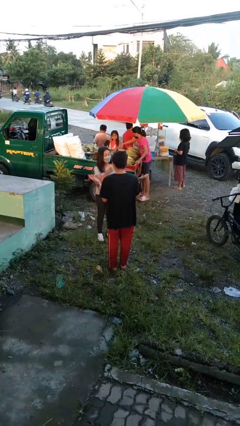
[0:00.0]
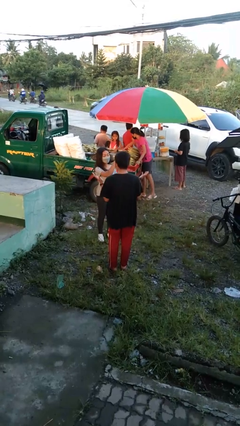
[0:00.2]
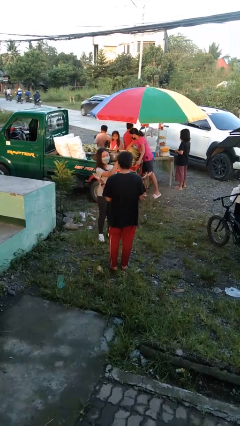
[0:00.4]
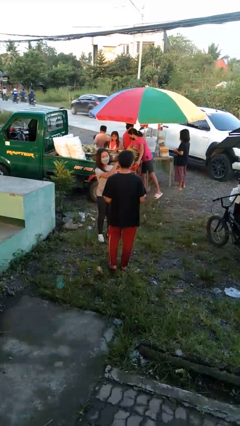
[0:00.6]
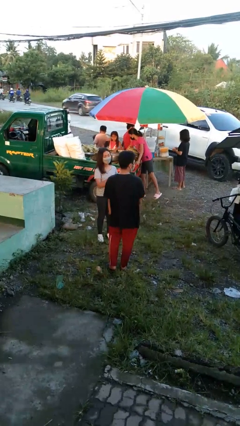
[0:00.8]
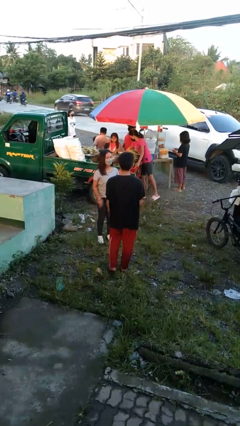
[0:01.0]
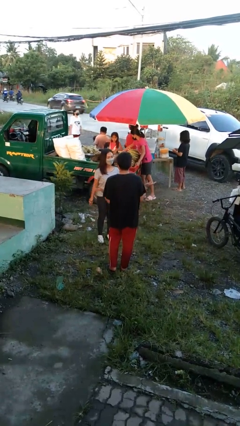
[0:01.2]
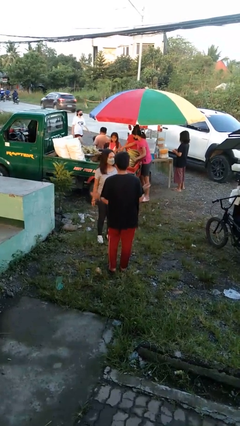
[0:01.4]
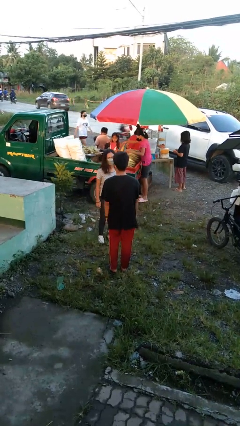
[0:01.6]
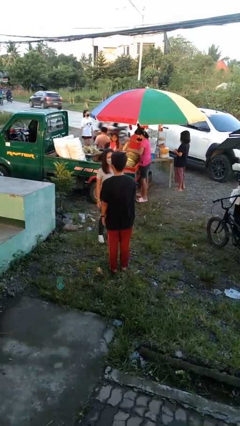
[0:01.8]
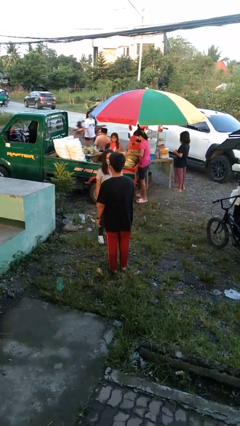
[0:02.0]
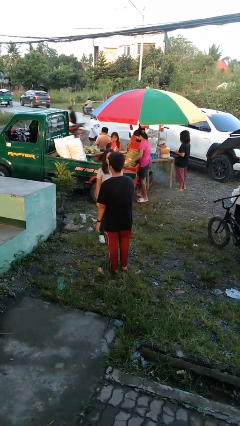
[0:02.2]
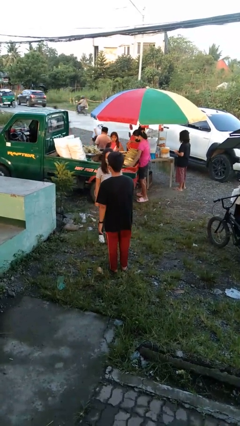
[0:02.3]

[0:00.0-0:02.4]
person talks to person

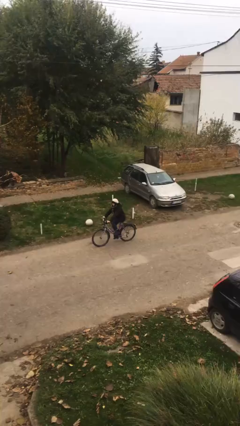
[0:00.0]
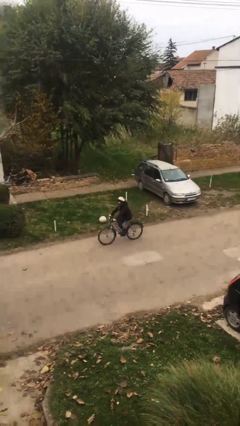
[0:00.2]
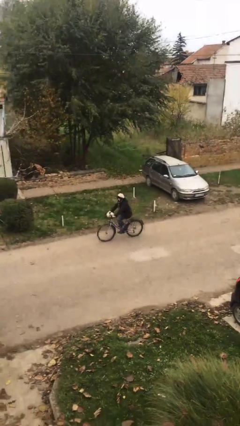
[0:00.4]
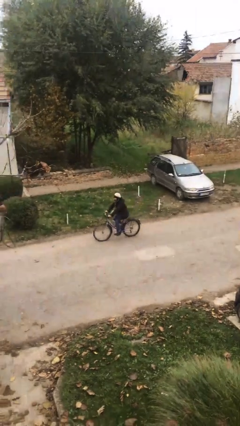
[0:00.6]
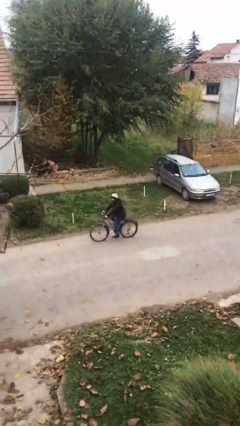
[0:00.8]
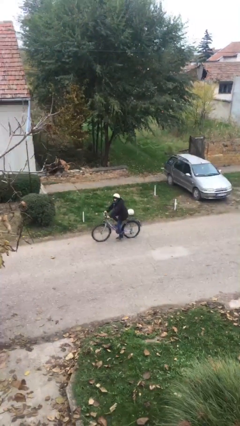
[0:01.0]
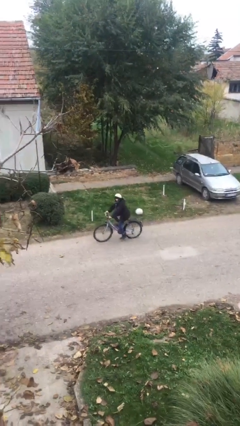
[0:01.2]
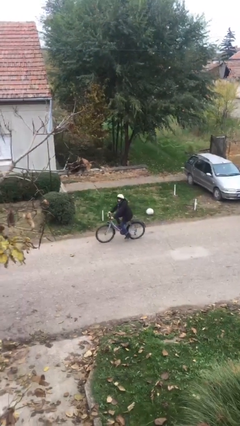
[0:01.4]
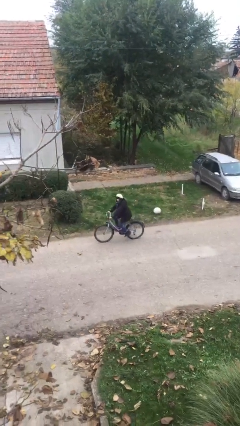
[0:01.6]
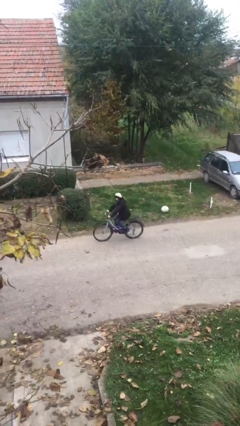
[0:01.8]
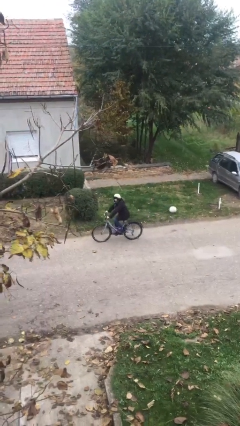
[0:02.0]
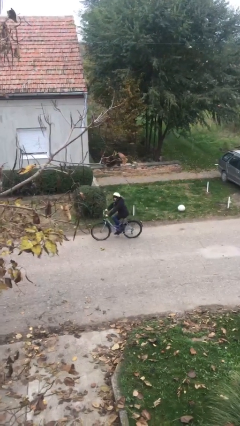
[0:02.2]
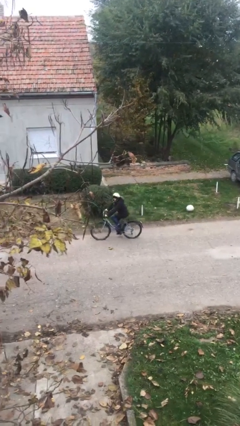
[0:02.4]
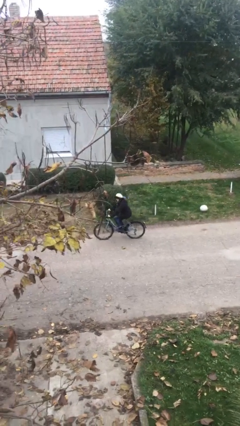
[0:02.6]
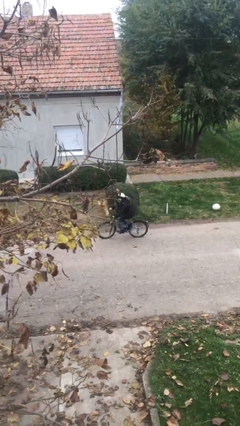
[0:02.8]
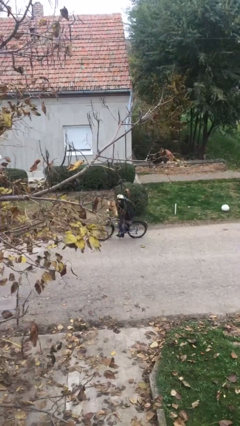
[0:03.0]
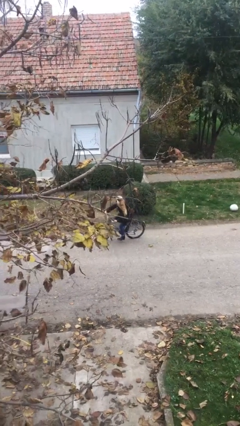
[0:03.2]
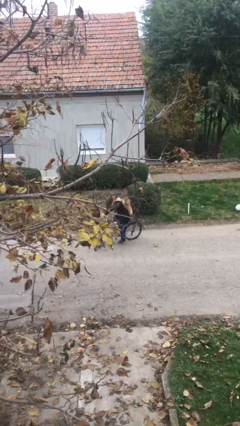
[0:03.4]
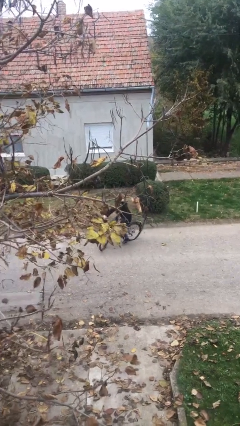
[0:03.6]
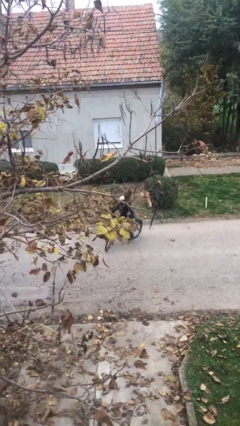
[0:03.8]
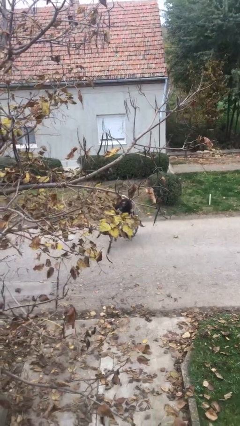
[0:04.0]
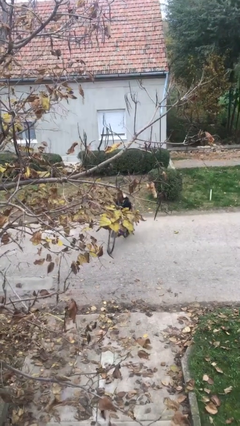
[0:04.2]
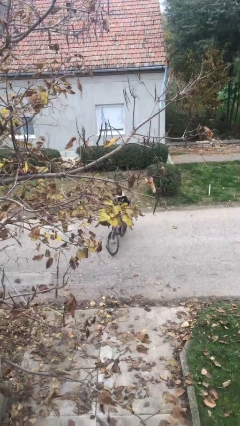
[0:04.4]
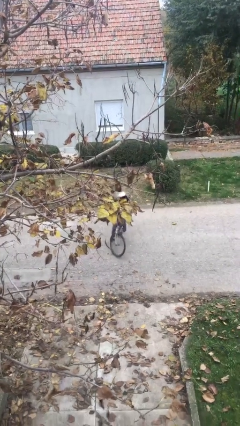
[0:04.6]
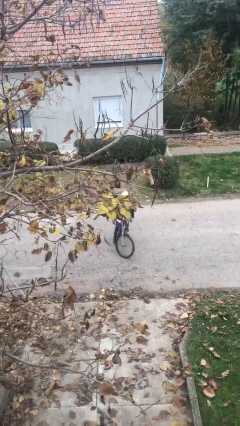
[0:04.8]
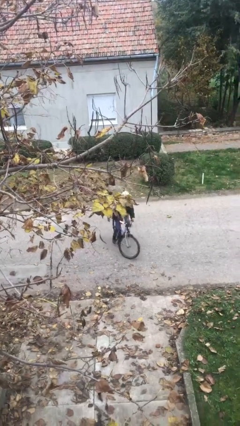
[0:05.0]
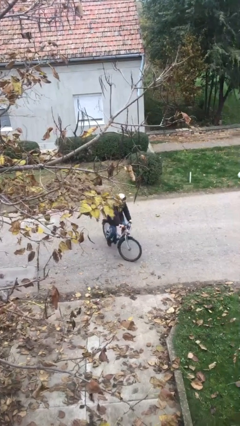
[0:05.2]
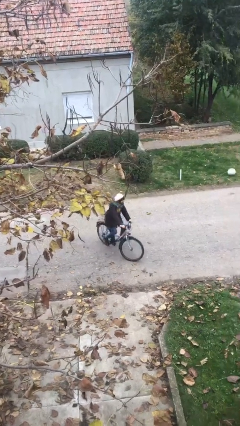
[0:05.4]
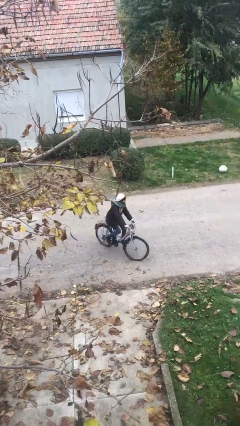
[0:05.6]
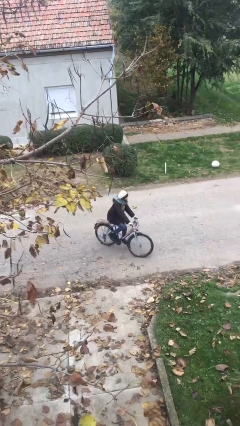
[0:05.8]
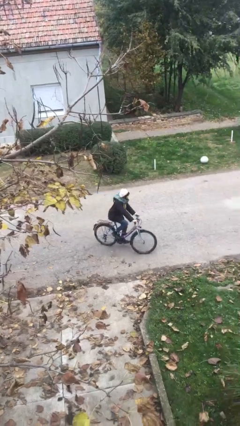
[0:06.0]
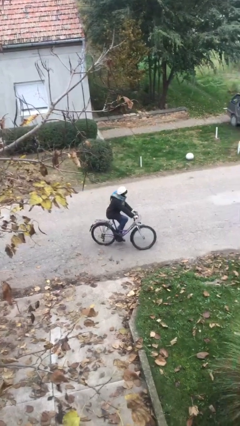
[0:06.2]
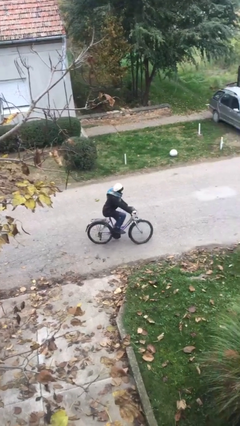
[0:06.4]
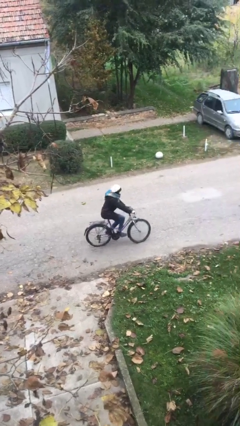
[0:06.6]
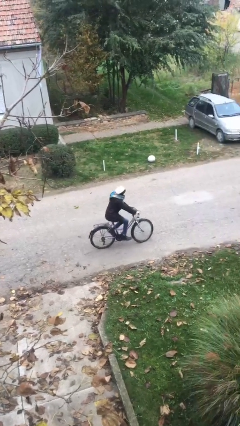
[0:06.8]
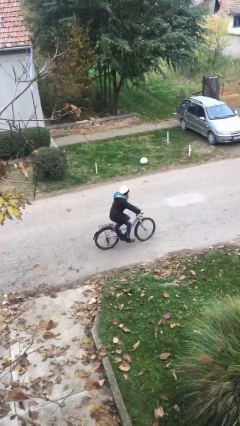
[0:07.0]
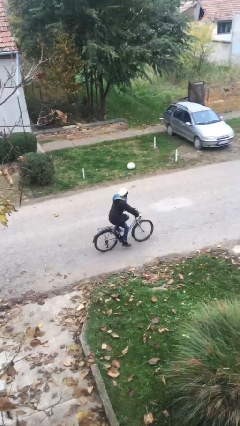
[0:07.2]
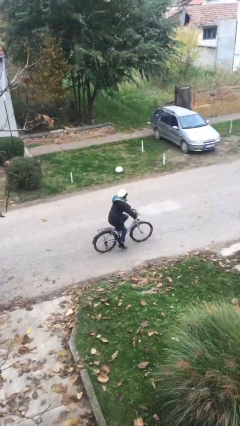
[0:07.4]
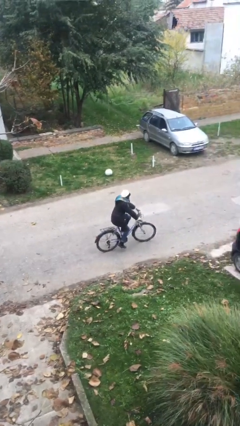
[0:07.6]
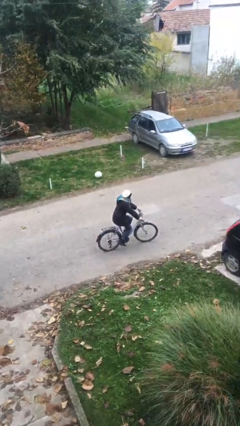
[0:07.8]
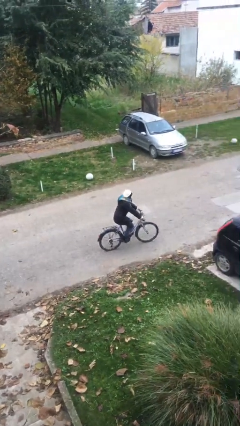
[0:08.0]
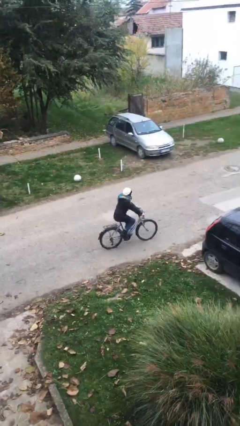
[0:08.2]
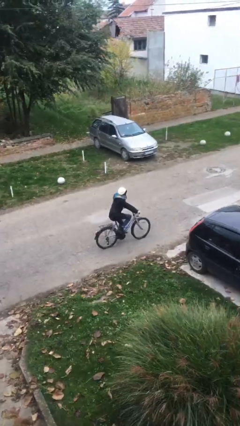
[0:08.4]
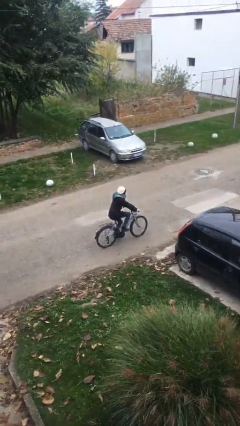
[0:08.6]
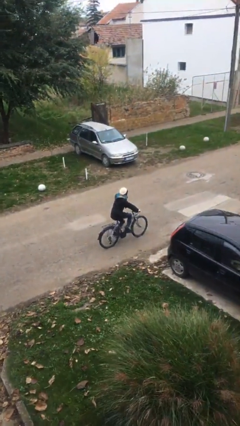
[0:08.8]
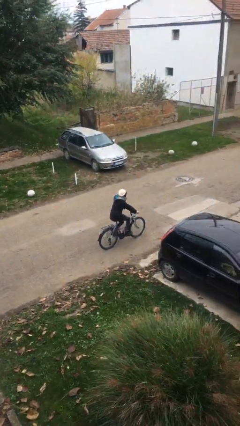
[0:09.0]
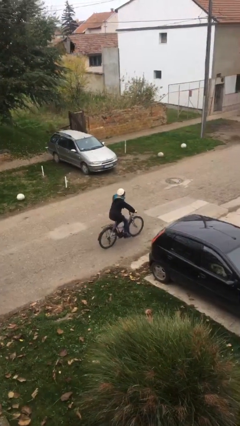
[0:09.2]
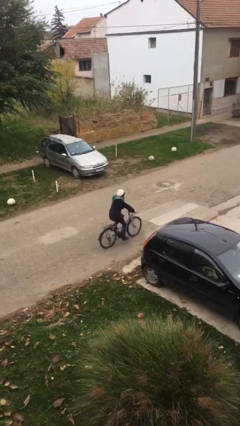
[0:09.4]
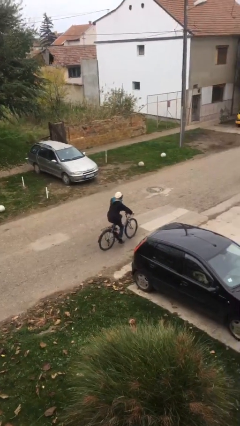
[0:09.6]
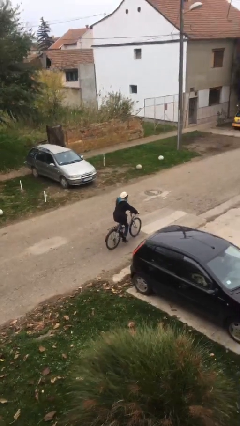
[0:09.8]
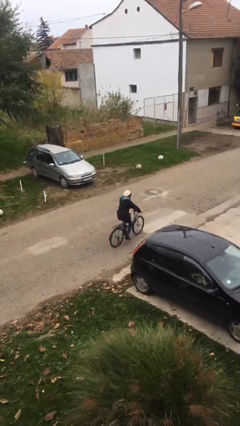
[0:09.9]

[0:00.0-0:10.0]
person rides bicycle

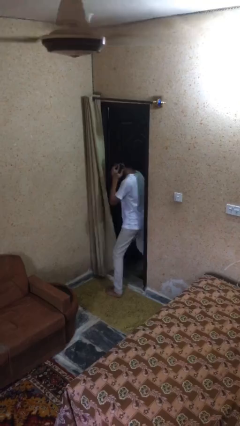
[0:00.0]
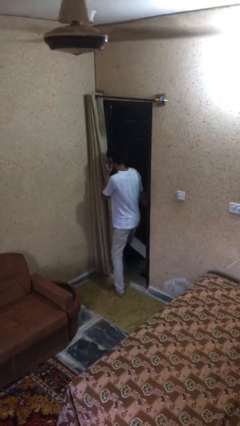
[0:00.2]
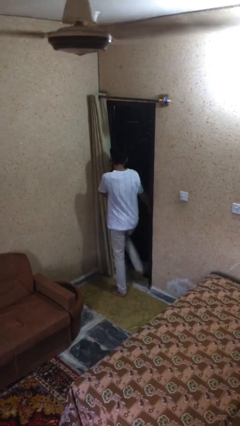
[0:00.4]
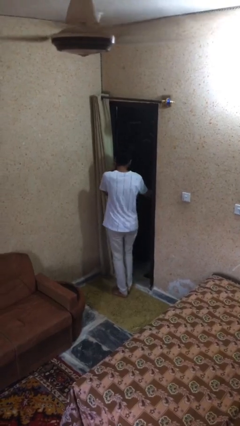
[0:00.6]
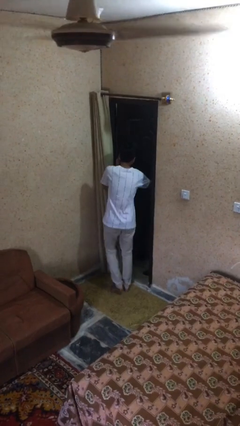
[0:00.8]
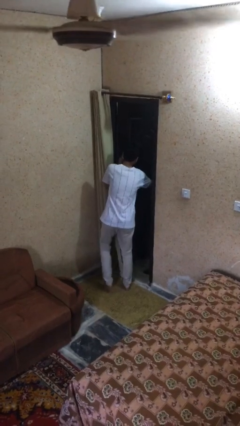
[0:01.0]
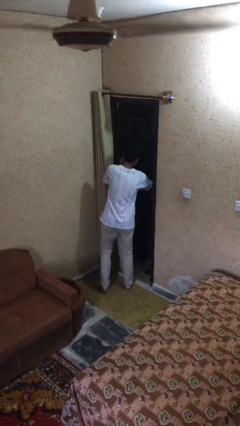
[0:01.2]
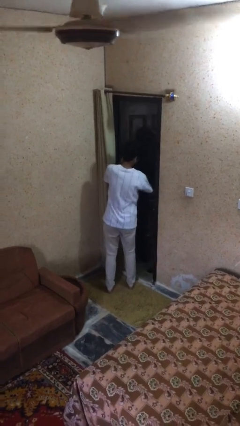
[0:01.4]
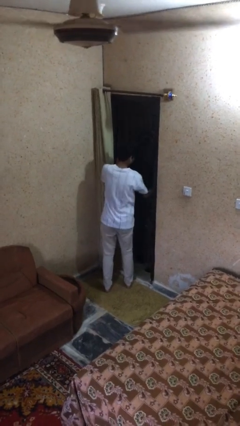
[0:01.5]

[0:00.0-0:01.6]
person enters scene through structure

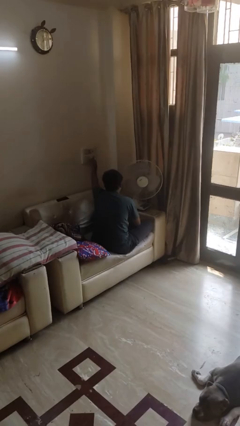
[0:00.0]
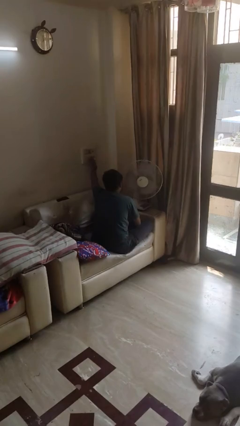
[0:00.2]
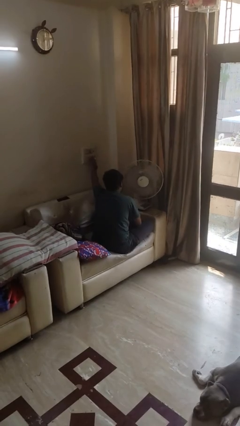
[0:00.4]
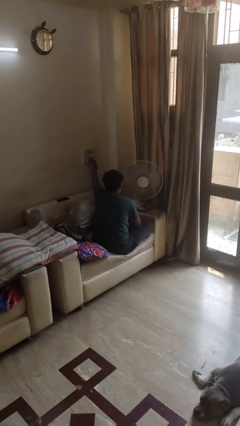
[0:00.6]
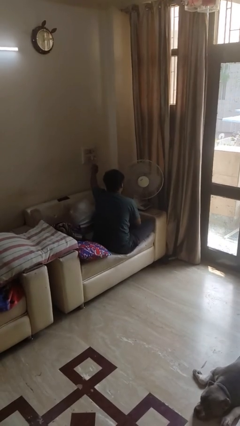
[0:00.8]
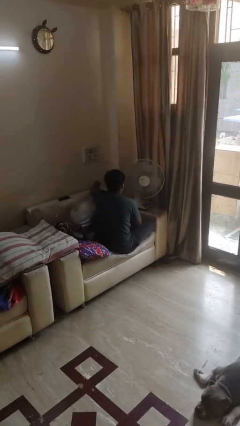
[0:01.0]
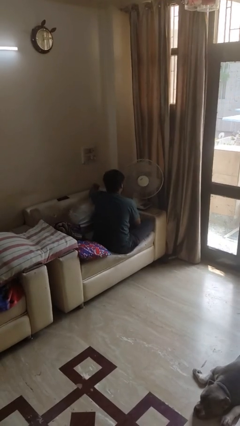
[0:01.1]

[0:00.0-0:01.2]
person turns off fan

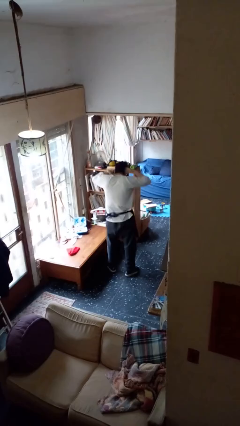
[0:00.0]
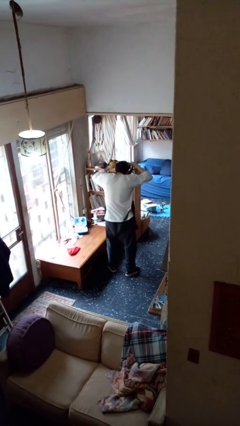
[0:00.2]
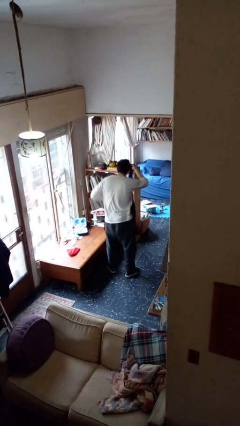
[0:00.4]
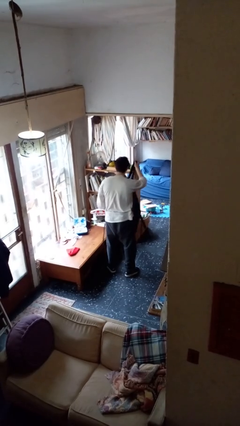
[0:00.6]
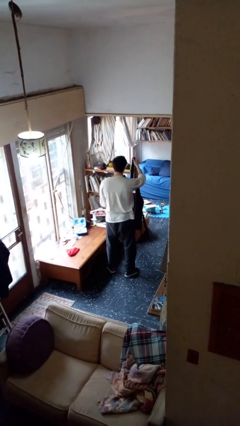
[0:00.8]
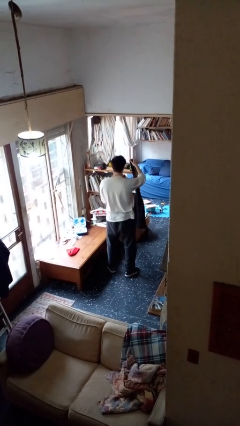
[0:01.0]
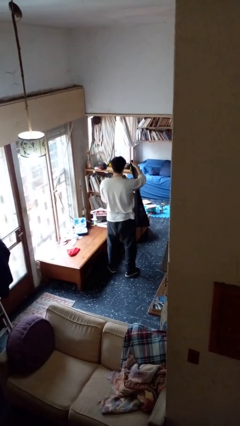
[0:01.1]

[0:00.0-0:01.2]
person takes off apron

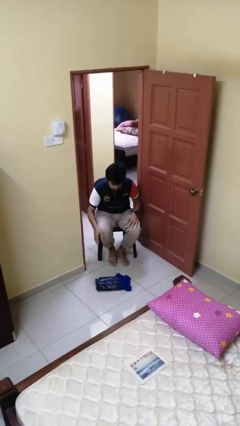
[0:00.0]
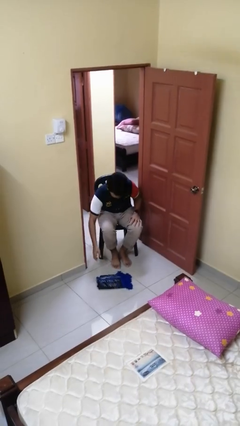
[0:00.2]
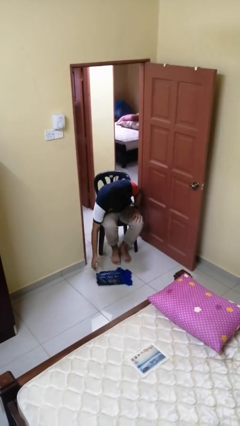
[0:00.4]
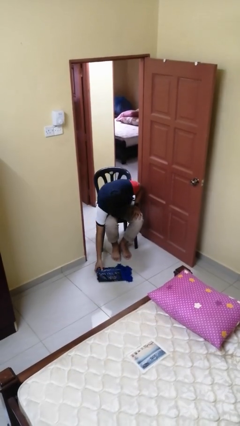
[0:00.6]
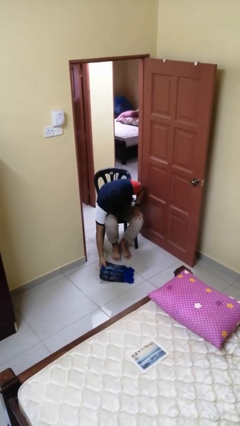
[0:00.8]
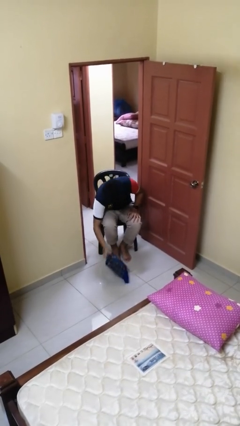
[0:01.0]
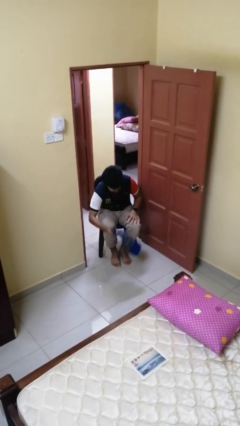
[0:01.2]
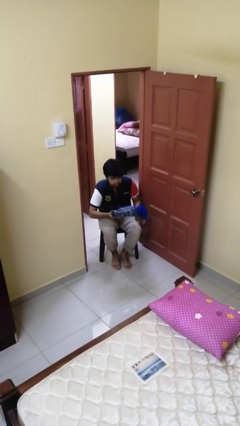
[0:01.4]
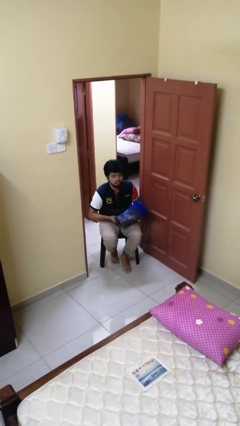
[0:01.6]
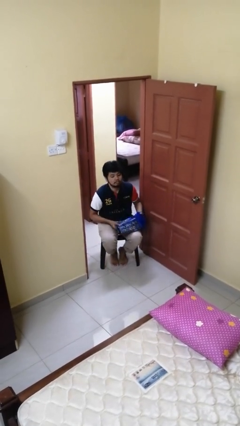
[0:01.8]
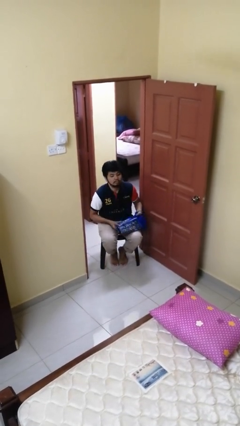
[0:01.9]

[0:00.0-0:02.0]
person picks up object from floor
